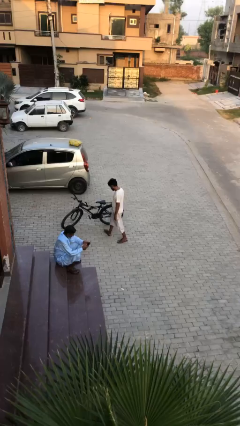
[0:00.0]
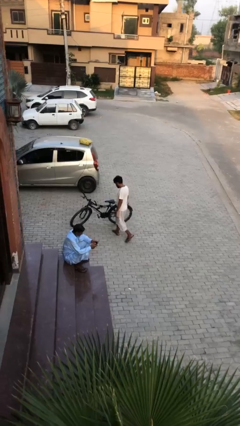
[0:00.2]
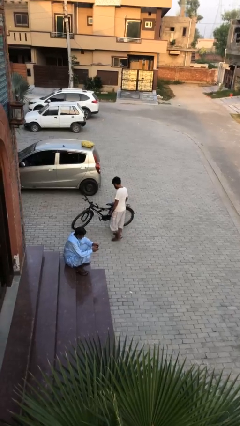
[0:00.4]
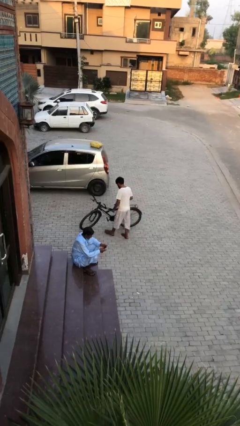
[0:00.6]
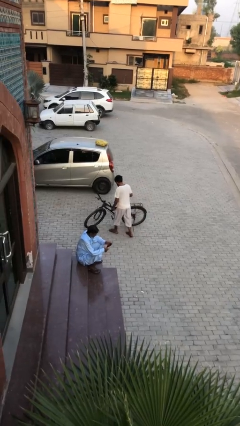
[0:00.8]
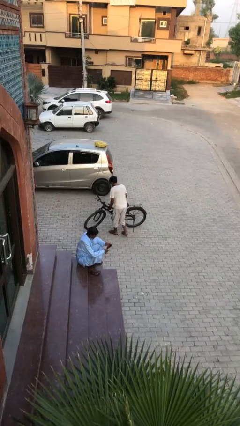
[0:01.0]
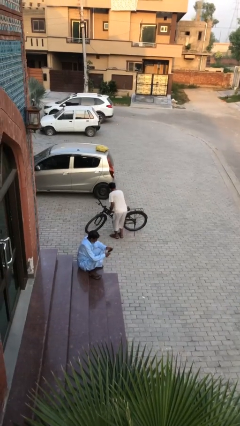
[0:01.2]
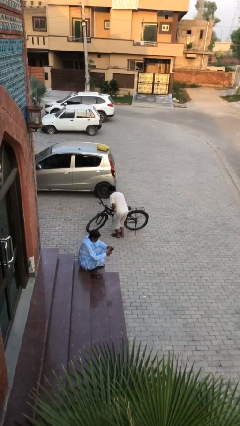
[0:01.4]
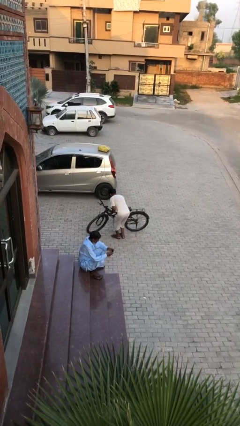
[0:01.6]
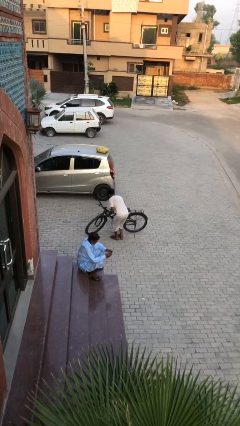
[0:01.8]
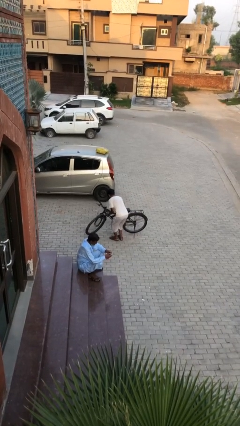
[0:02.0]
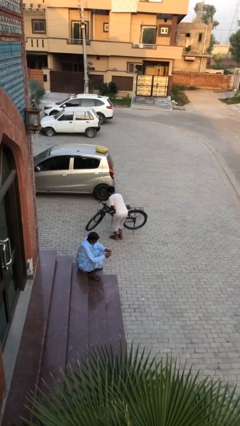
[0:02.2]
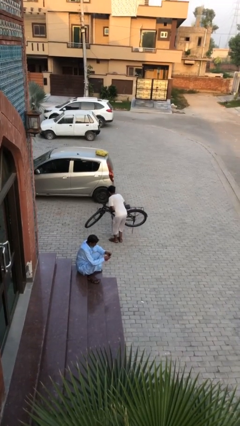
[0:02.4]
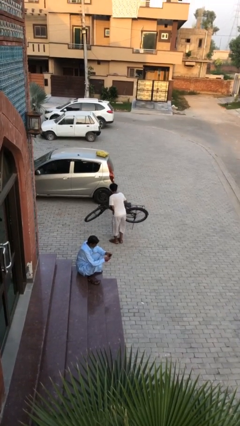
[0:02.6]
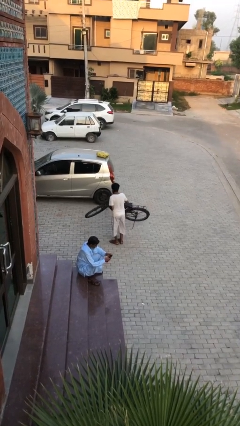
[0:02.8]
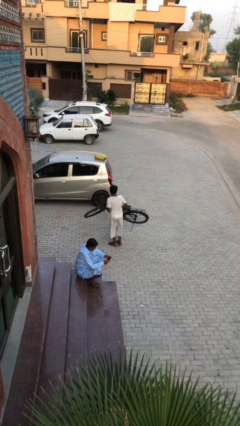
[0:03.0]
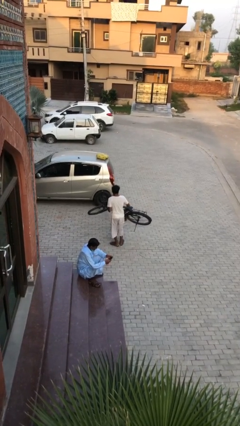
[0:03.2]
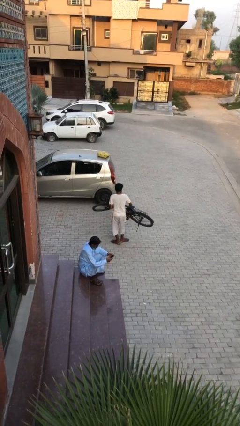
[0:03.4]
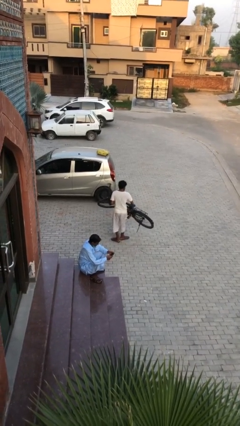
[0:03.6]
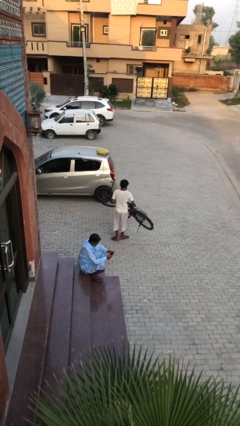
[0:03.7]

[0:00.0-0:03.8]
person picks up object from floor

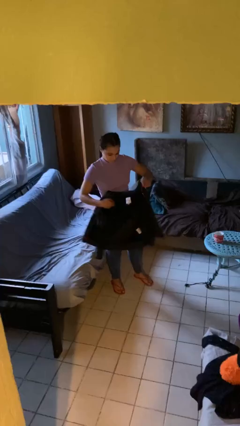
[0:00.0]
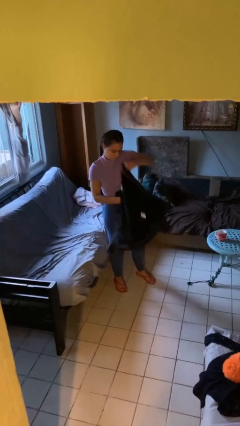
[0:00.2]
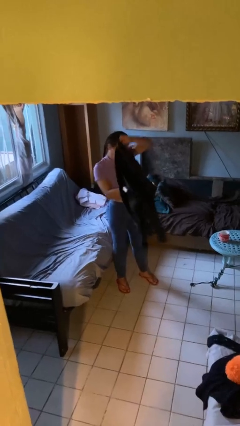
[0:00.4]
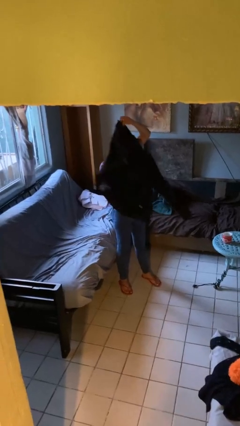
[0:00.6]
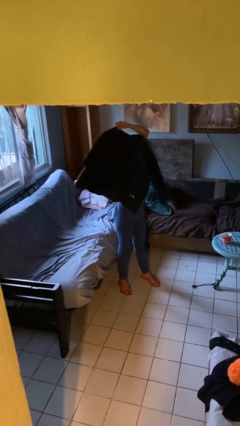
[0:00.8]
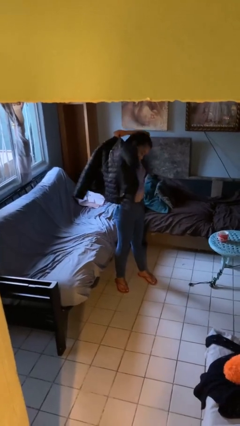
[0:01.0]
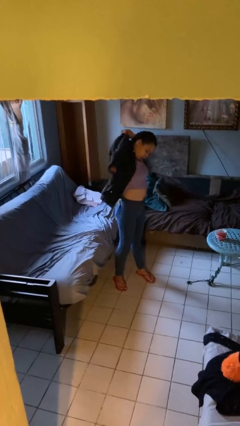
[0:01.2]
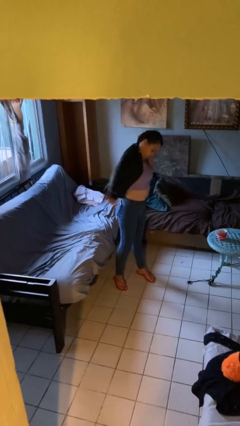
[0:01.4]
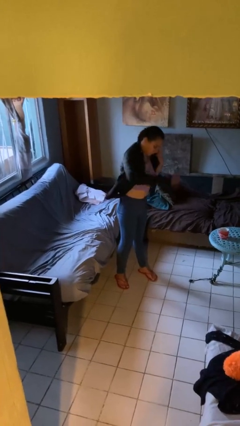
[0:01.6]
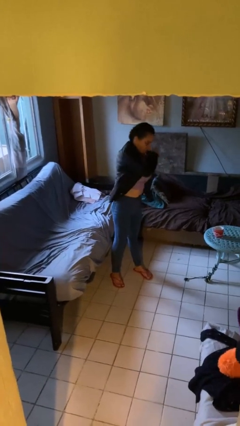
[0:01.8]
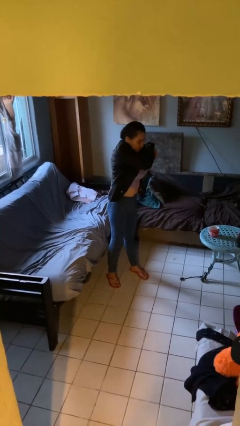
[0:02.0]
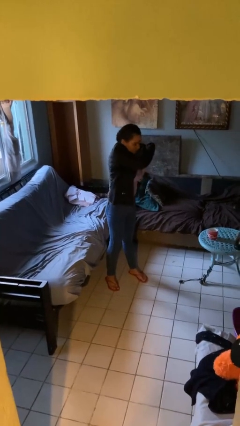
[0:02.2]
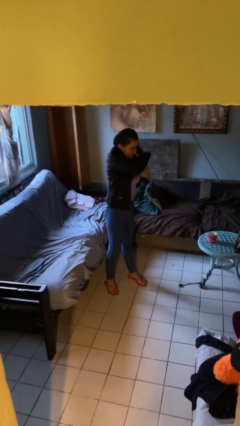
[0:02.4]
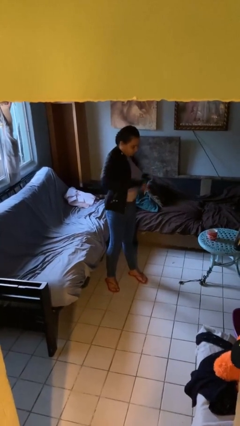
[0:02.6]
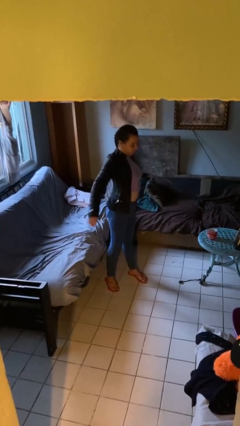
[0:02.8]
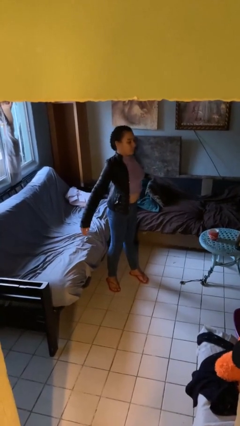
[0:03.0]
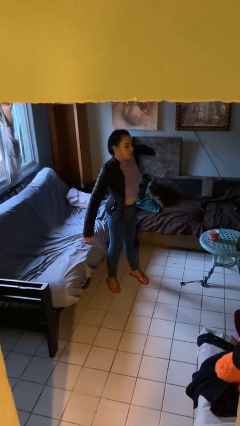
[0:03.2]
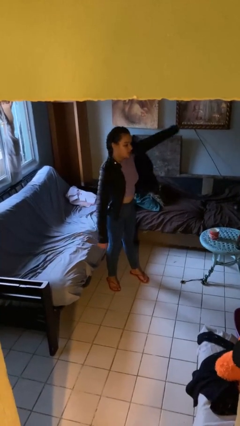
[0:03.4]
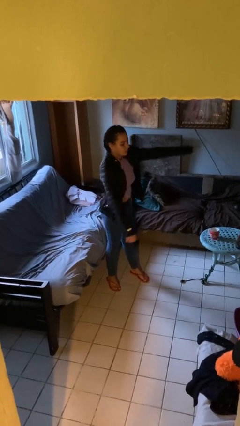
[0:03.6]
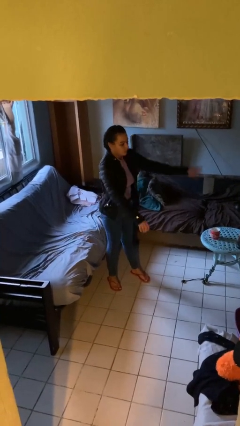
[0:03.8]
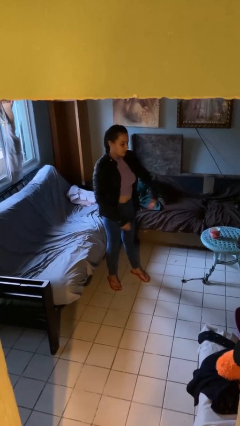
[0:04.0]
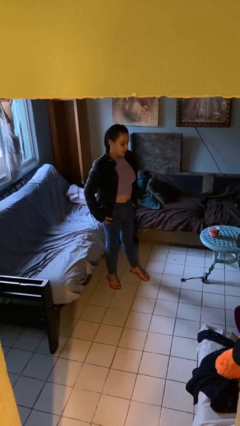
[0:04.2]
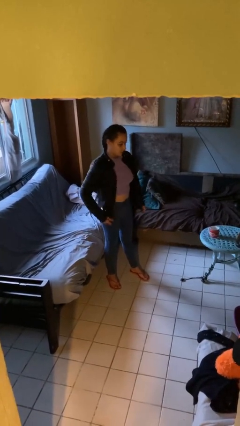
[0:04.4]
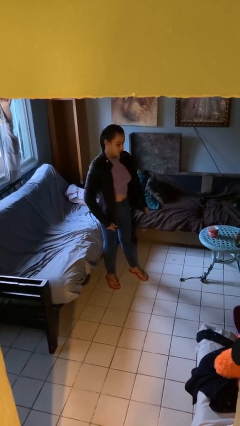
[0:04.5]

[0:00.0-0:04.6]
person puts on jacket

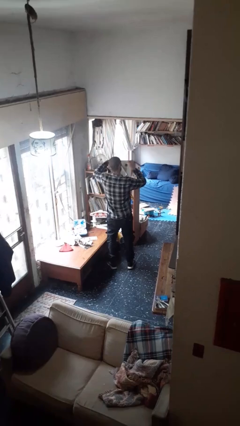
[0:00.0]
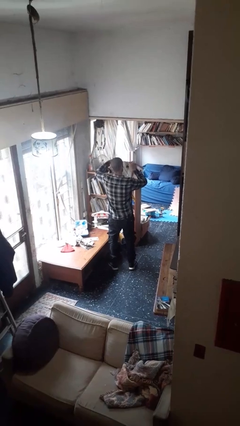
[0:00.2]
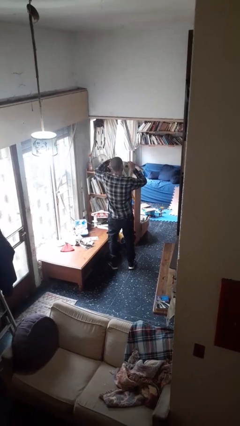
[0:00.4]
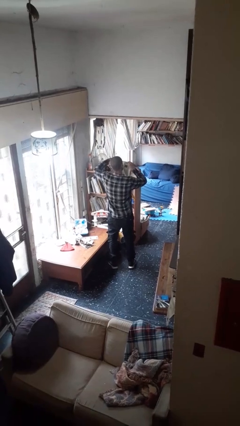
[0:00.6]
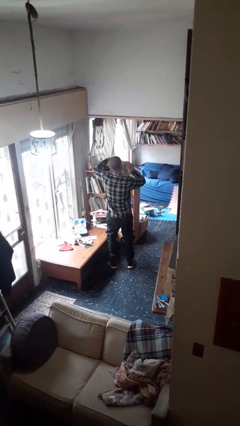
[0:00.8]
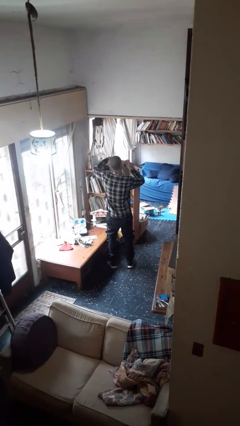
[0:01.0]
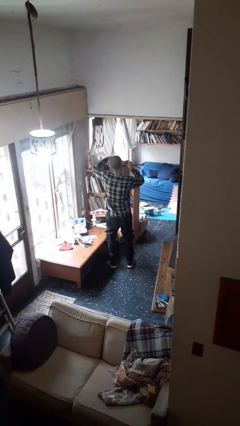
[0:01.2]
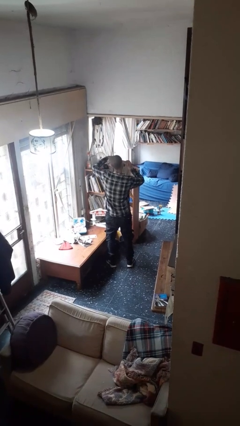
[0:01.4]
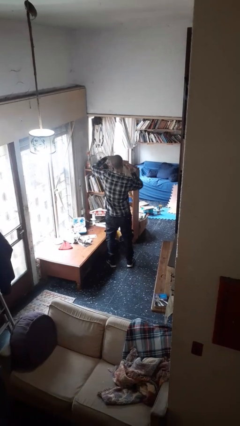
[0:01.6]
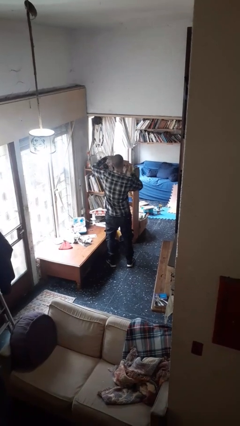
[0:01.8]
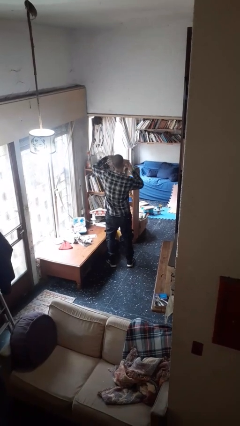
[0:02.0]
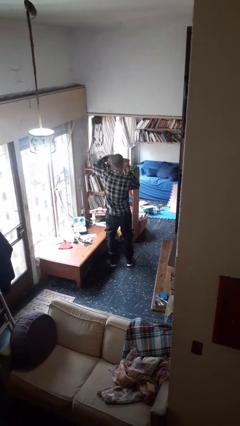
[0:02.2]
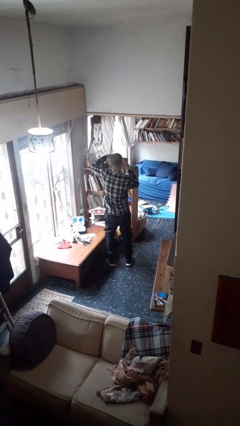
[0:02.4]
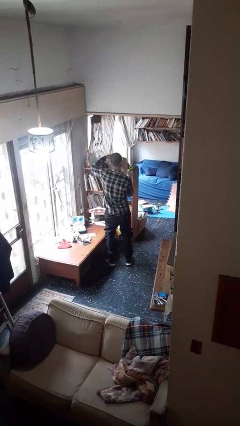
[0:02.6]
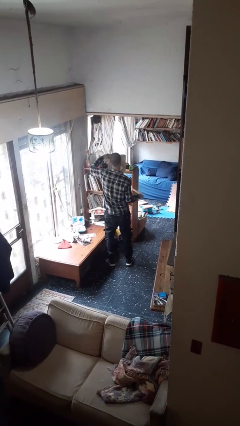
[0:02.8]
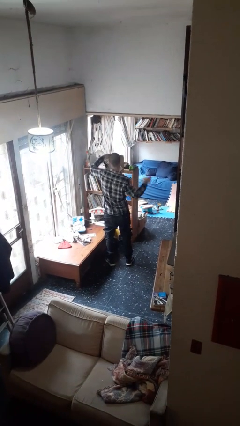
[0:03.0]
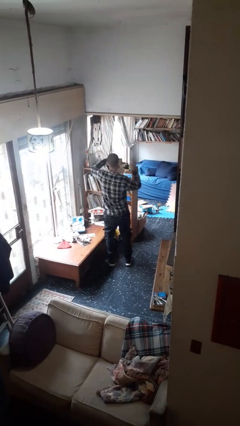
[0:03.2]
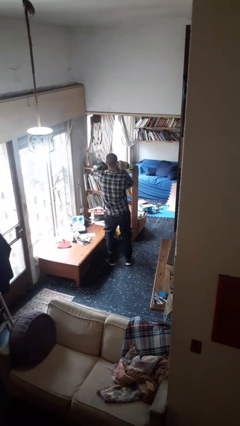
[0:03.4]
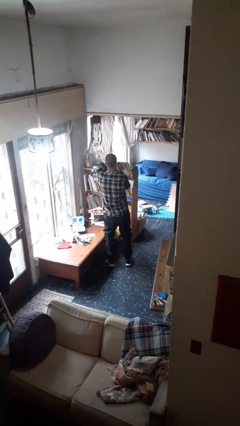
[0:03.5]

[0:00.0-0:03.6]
person tears paper

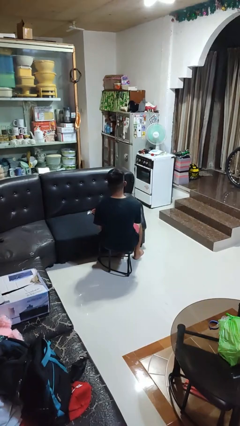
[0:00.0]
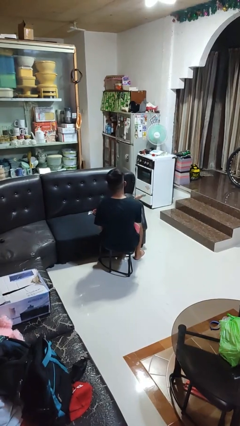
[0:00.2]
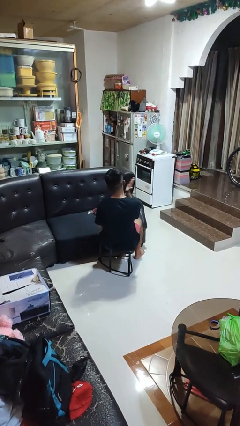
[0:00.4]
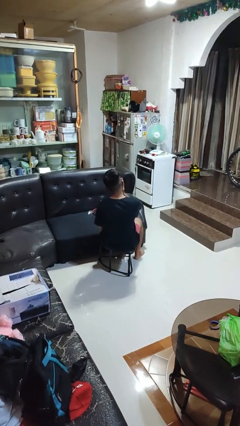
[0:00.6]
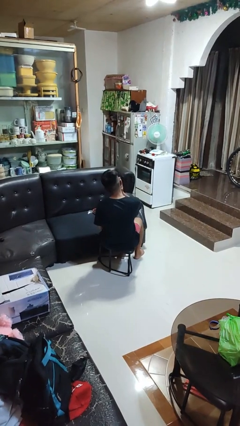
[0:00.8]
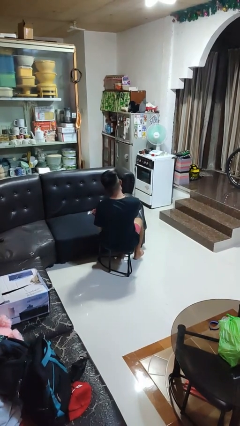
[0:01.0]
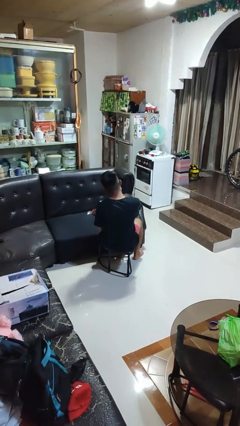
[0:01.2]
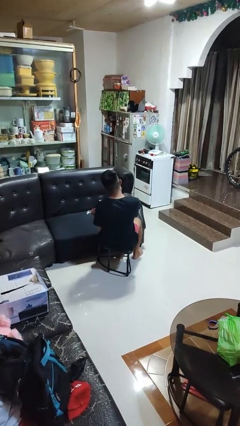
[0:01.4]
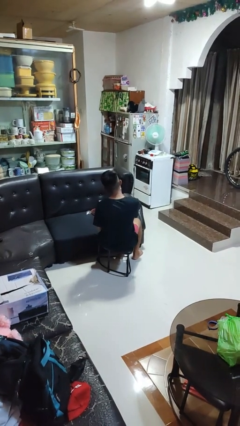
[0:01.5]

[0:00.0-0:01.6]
person swats bug

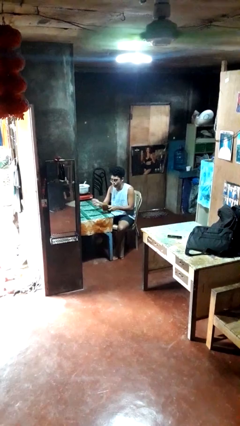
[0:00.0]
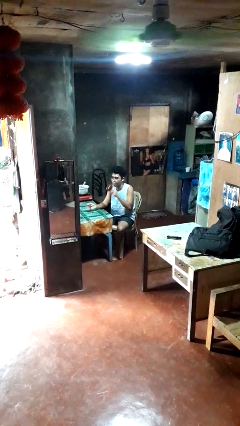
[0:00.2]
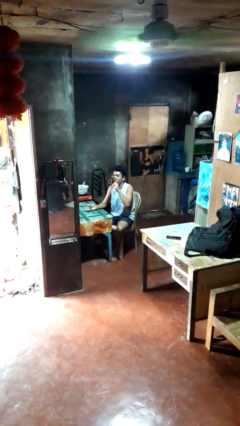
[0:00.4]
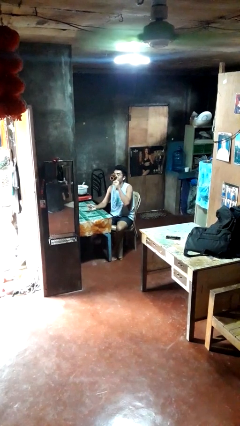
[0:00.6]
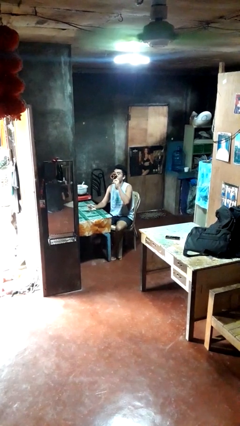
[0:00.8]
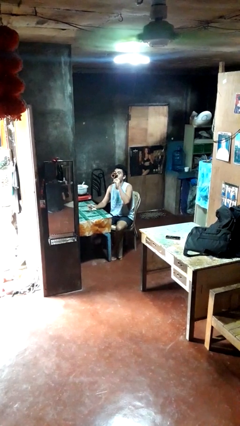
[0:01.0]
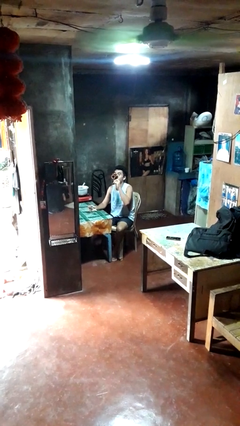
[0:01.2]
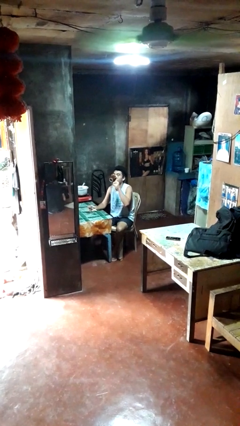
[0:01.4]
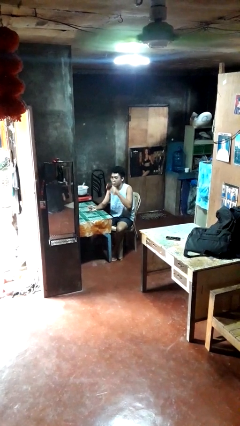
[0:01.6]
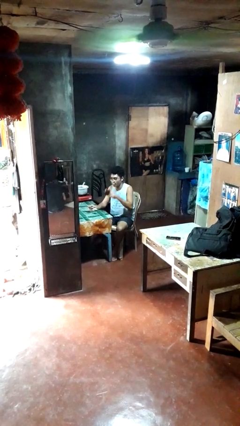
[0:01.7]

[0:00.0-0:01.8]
person drinks from mug

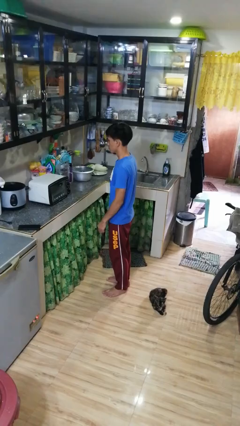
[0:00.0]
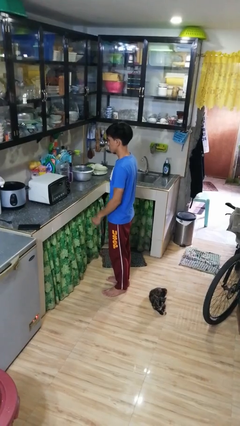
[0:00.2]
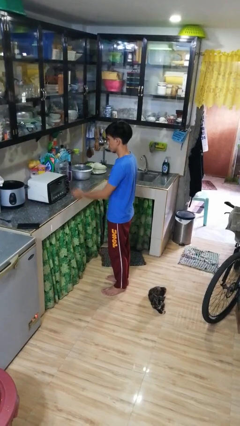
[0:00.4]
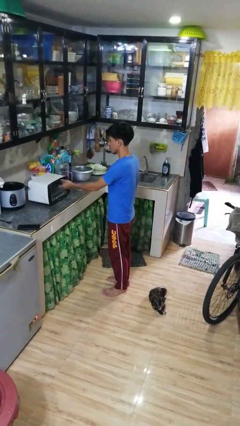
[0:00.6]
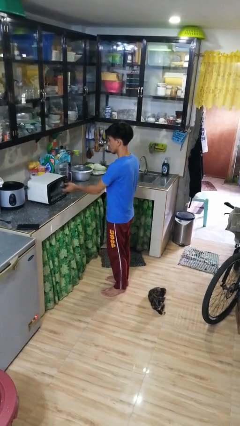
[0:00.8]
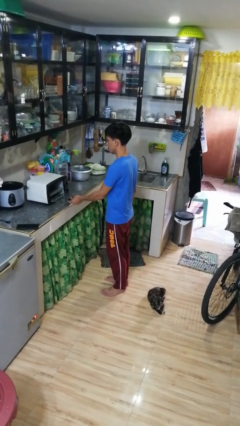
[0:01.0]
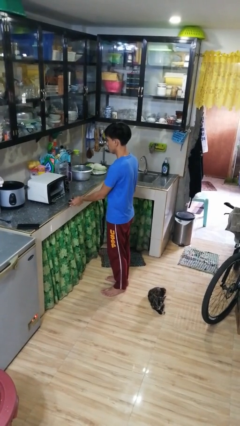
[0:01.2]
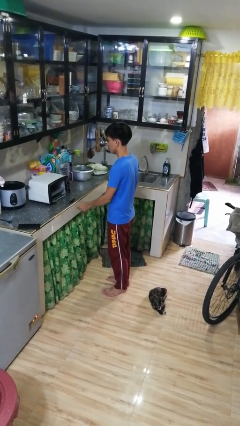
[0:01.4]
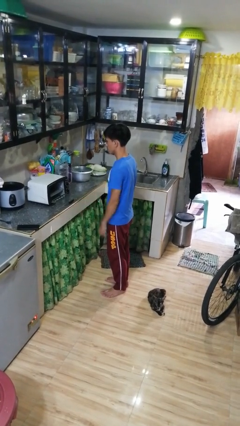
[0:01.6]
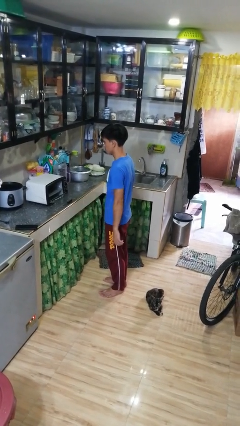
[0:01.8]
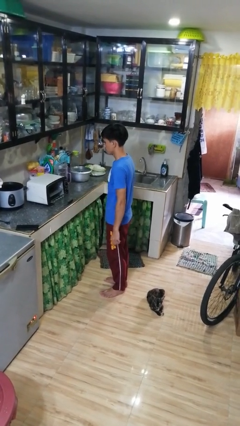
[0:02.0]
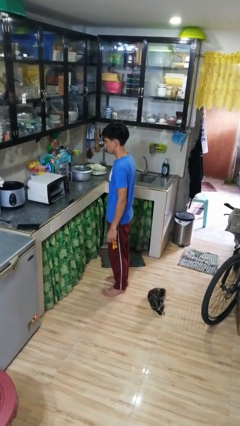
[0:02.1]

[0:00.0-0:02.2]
person opens microwave
